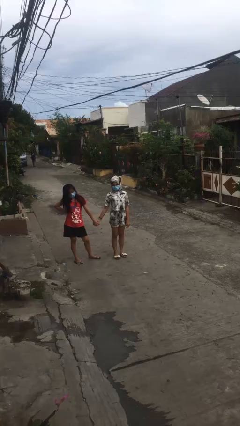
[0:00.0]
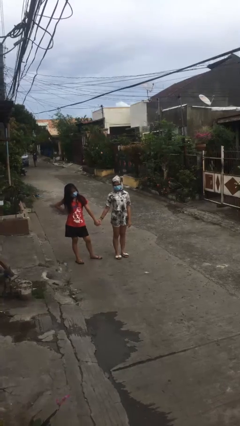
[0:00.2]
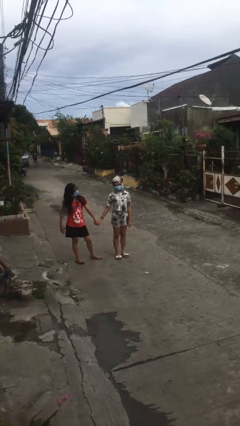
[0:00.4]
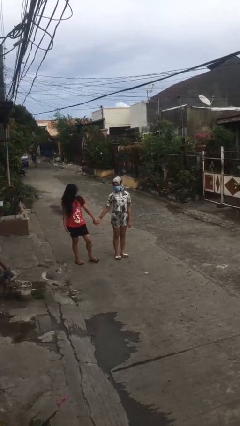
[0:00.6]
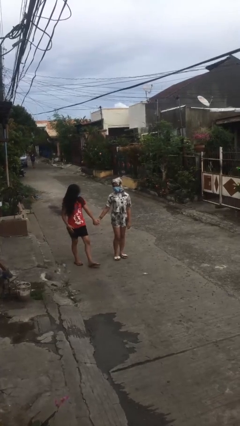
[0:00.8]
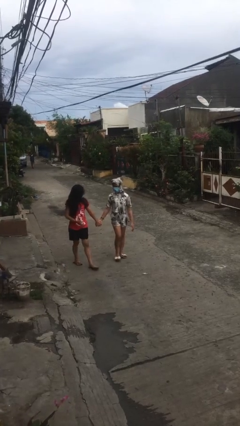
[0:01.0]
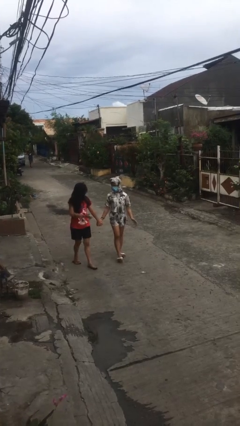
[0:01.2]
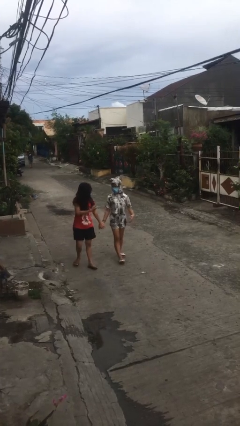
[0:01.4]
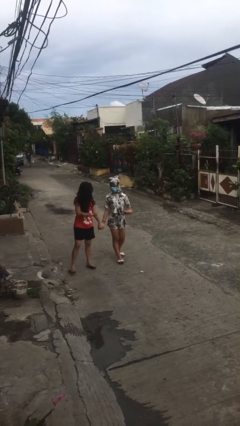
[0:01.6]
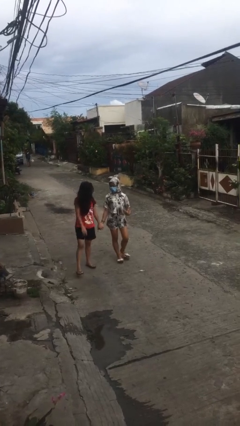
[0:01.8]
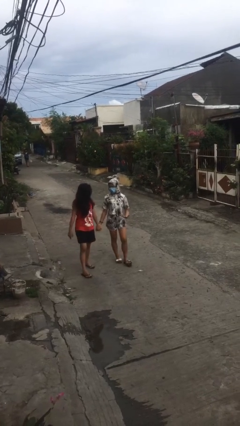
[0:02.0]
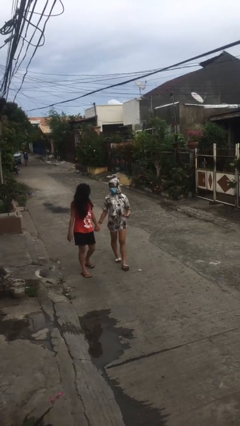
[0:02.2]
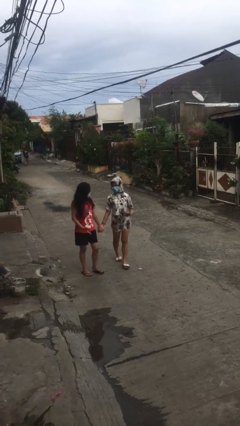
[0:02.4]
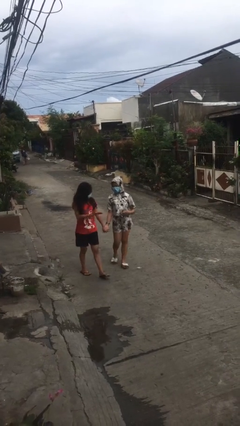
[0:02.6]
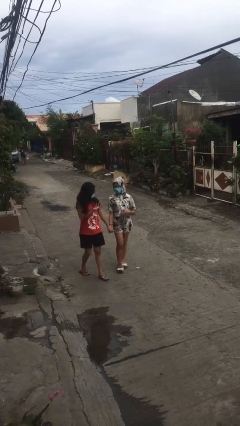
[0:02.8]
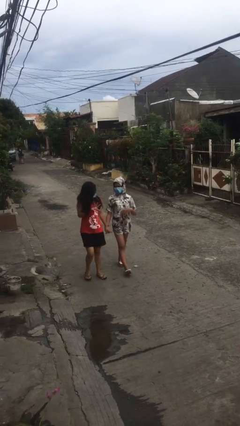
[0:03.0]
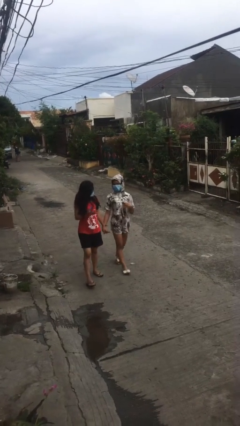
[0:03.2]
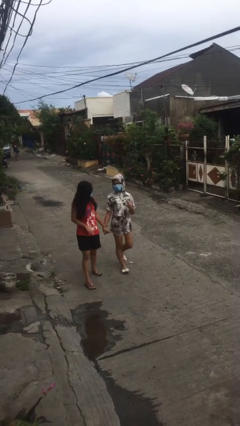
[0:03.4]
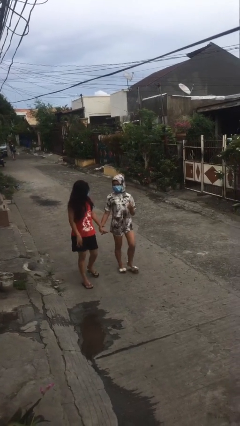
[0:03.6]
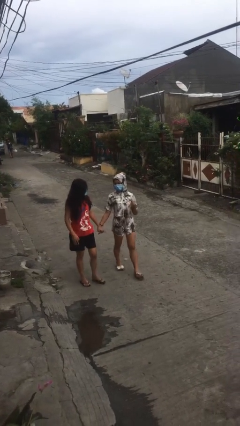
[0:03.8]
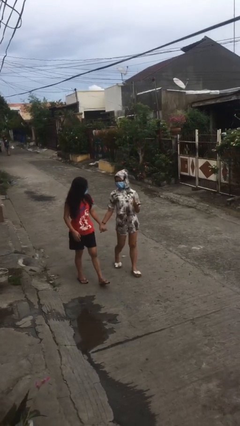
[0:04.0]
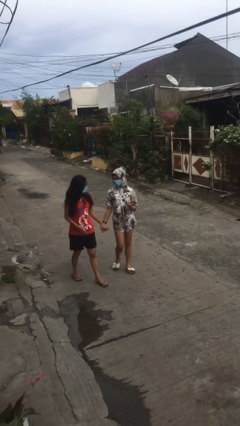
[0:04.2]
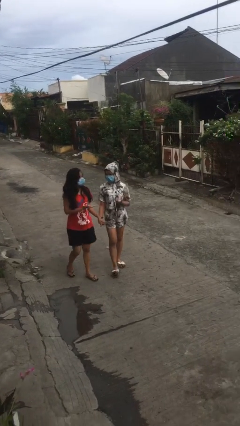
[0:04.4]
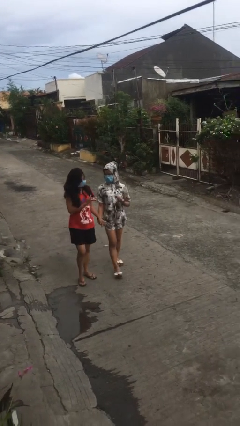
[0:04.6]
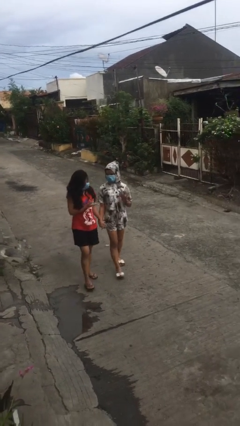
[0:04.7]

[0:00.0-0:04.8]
person holds hand

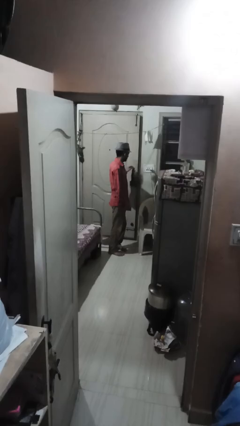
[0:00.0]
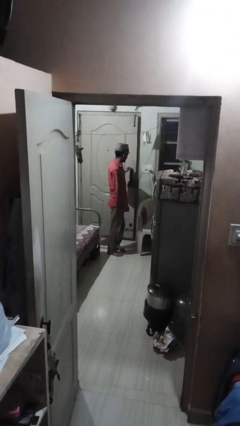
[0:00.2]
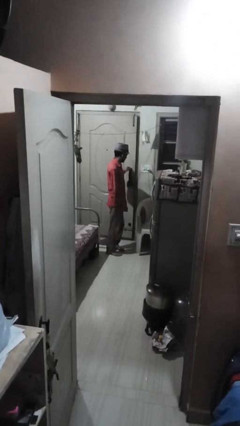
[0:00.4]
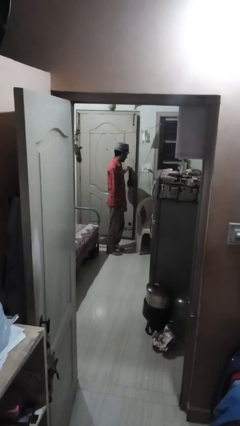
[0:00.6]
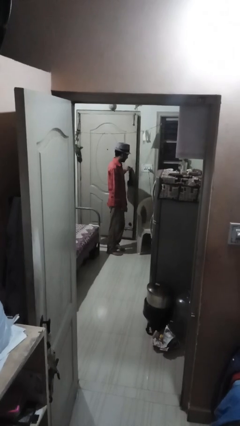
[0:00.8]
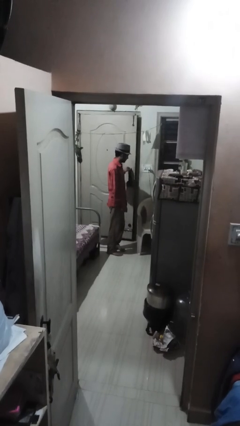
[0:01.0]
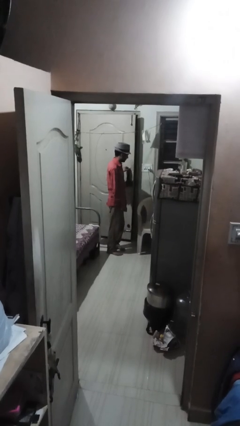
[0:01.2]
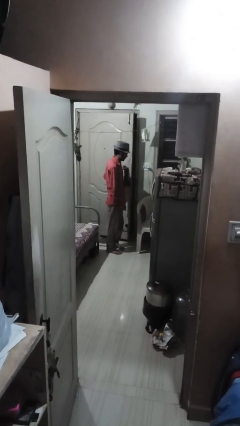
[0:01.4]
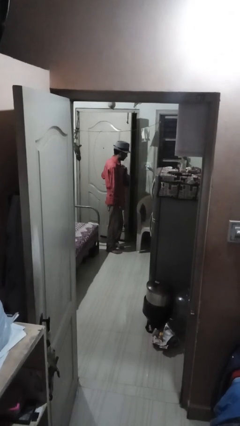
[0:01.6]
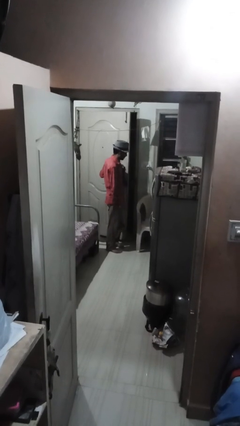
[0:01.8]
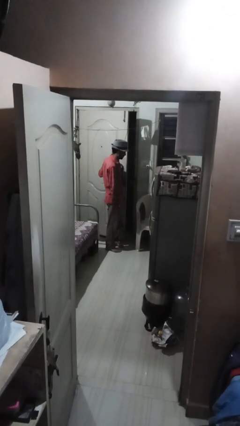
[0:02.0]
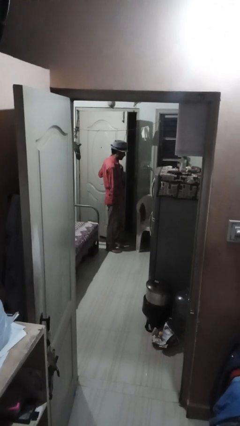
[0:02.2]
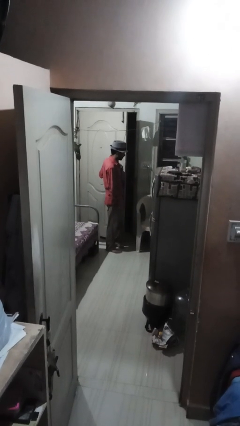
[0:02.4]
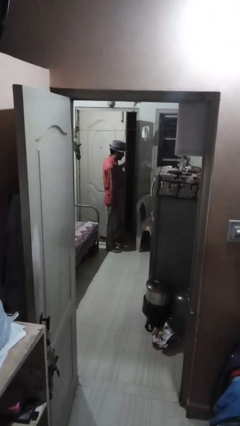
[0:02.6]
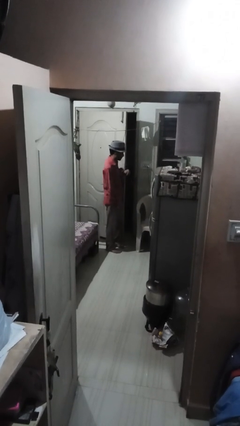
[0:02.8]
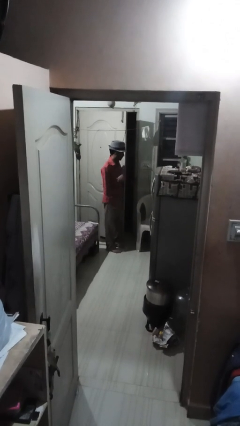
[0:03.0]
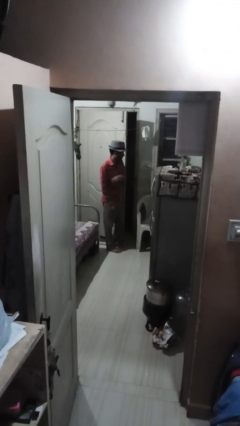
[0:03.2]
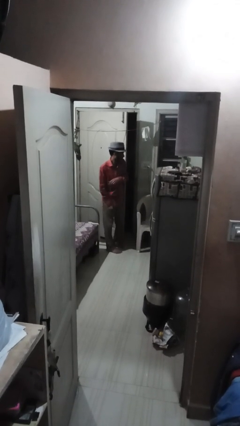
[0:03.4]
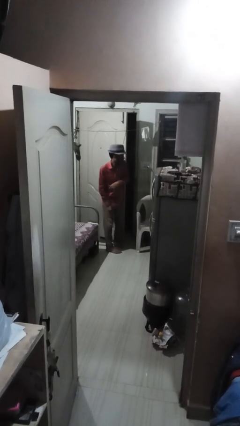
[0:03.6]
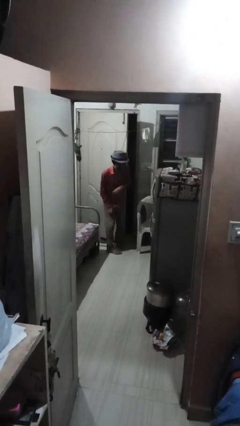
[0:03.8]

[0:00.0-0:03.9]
person opens facility door

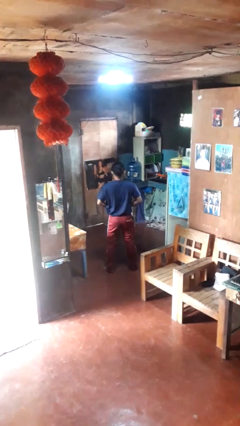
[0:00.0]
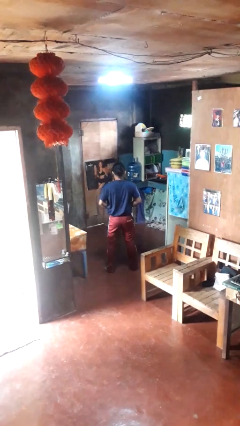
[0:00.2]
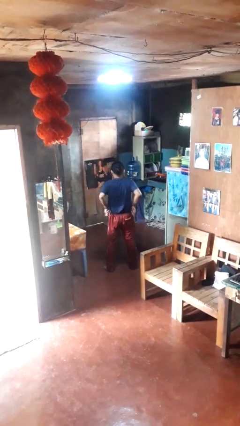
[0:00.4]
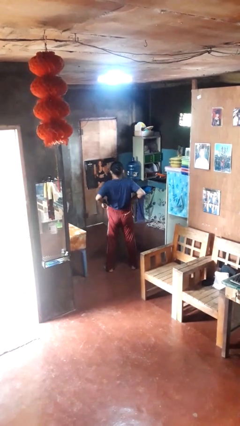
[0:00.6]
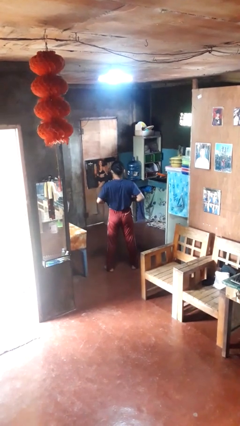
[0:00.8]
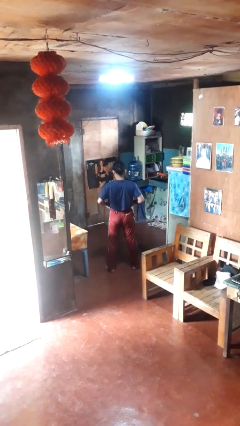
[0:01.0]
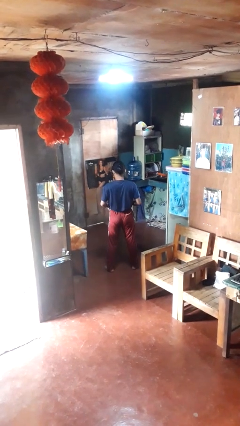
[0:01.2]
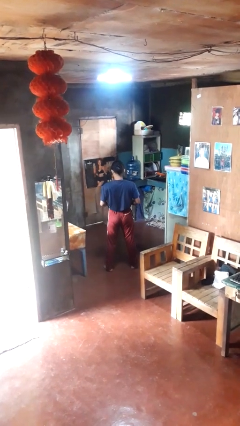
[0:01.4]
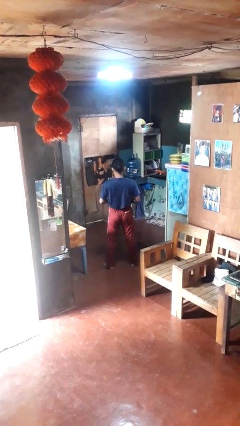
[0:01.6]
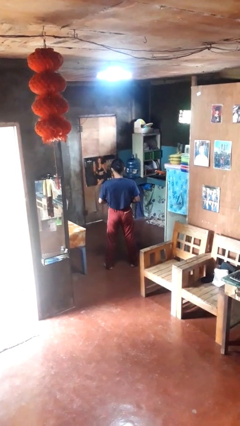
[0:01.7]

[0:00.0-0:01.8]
person hikes up pants

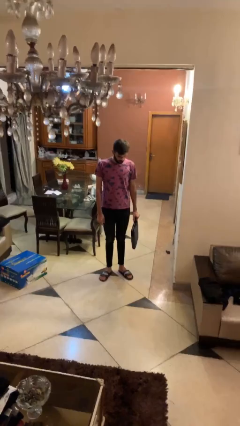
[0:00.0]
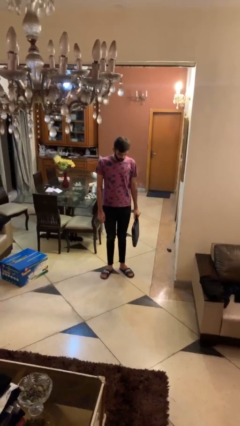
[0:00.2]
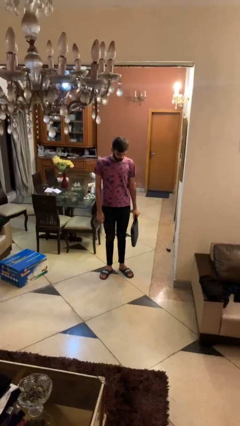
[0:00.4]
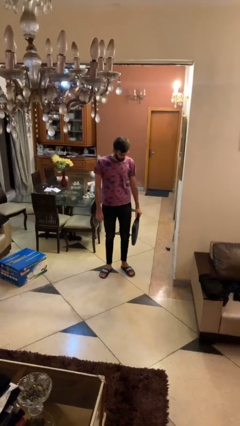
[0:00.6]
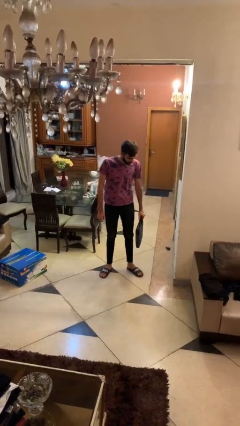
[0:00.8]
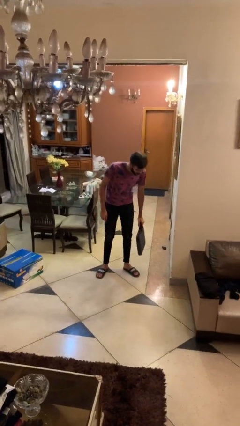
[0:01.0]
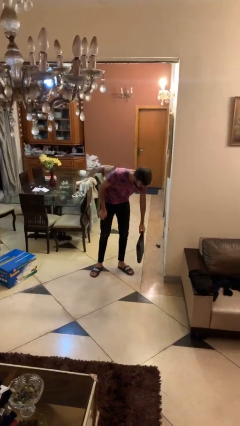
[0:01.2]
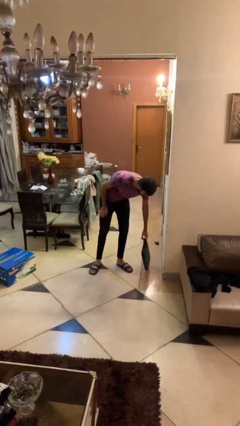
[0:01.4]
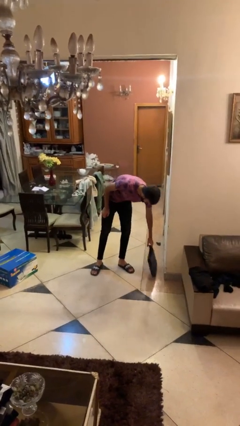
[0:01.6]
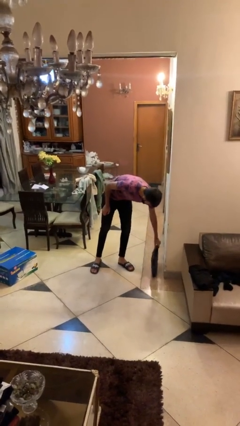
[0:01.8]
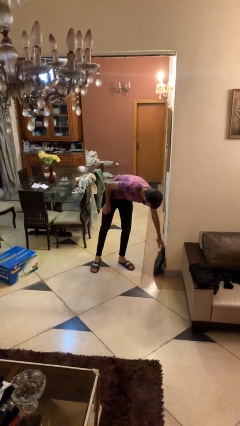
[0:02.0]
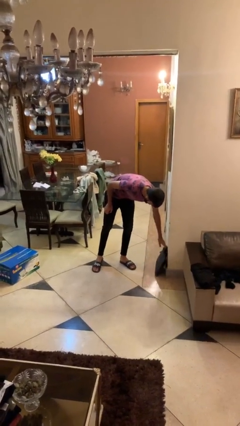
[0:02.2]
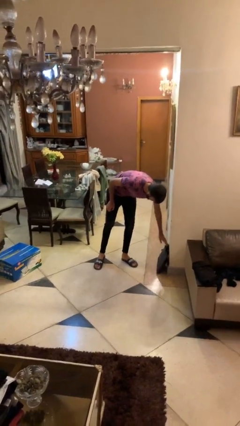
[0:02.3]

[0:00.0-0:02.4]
person puts down object on floor

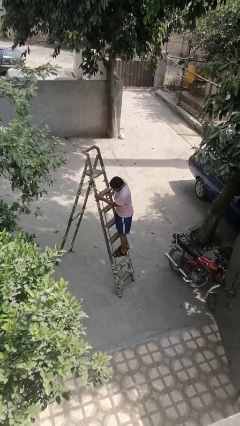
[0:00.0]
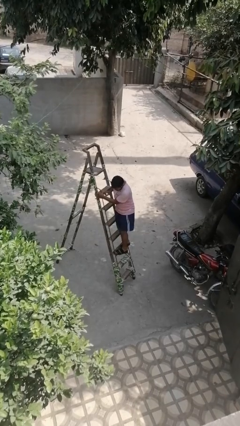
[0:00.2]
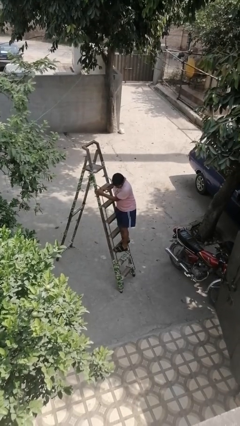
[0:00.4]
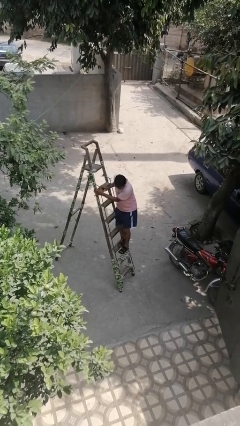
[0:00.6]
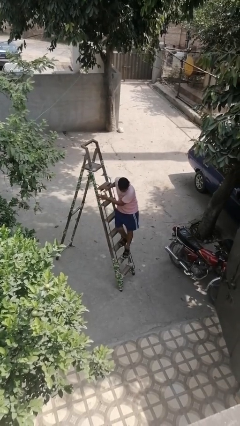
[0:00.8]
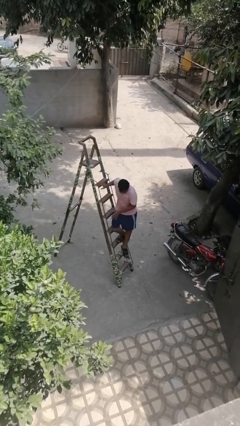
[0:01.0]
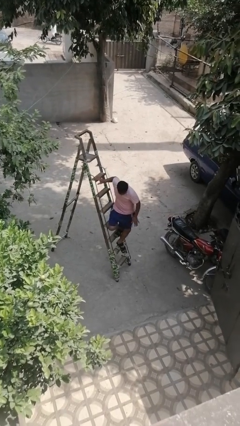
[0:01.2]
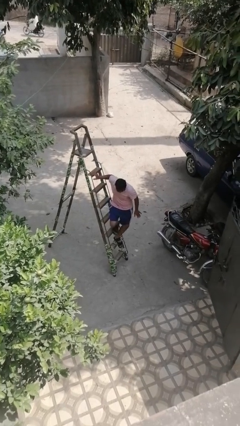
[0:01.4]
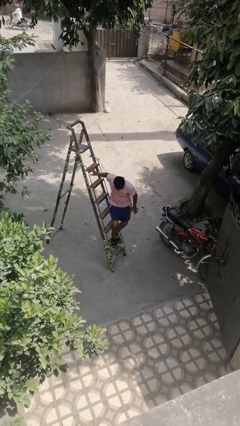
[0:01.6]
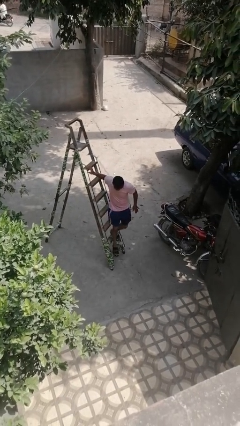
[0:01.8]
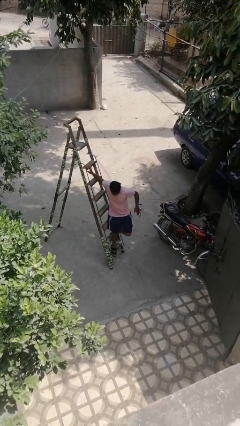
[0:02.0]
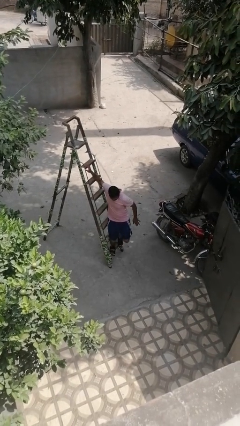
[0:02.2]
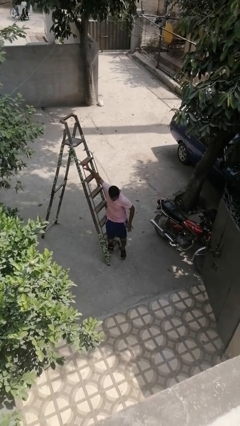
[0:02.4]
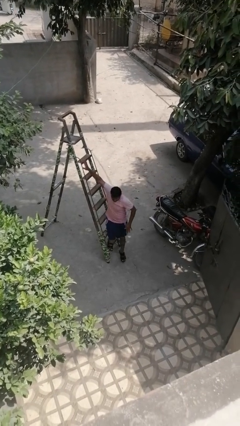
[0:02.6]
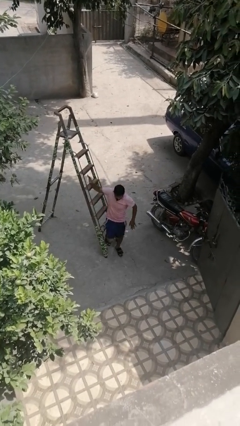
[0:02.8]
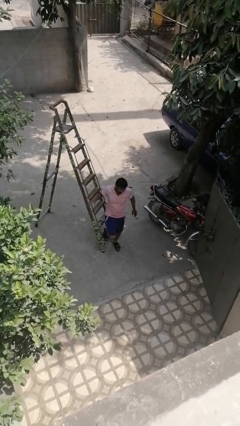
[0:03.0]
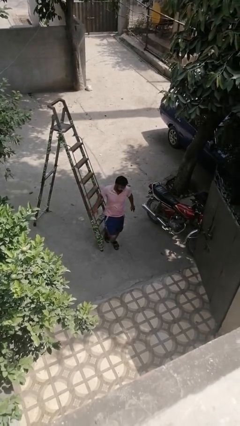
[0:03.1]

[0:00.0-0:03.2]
person climbs down ladder

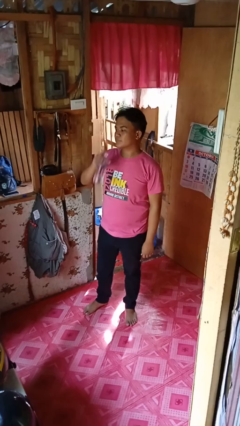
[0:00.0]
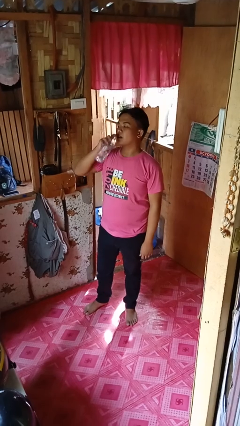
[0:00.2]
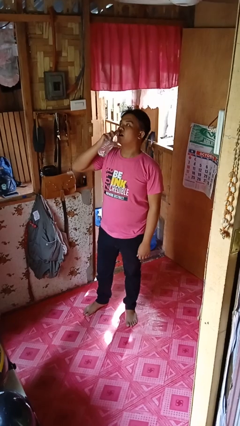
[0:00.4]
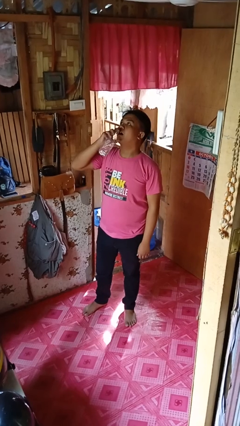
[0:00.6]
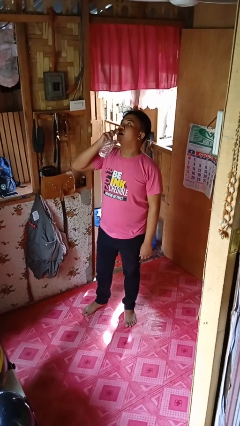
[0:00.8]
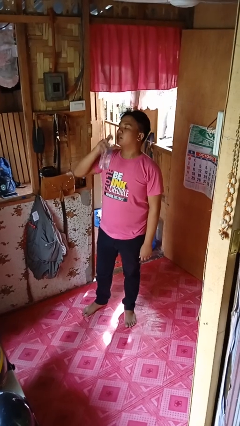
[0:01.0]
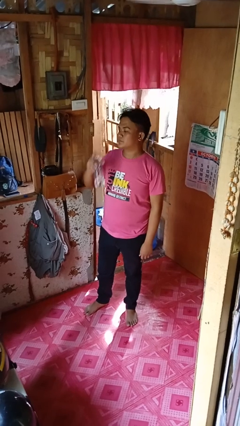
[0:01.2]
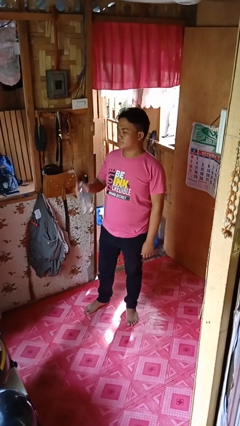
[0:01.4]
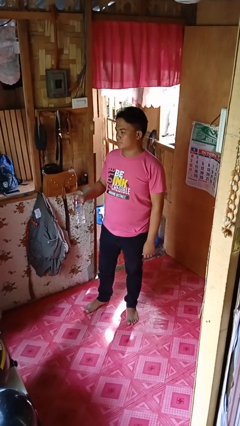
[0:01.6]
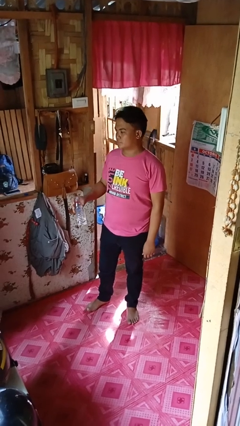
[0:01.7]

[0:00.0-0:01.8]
person drinks from bottle
